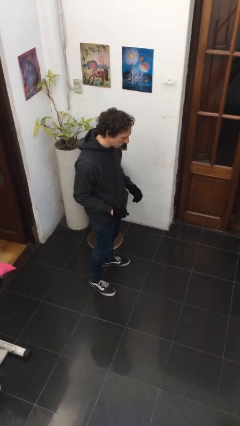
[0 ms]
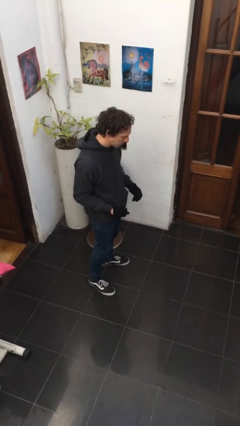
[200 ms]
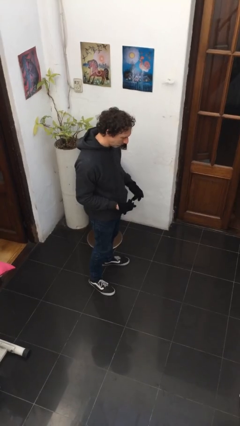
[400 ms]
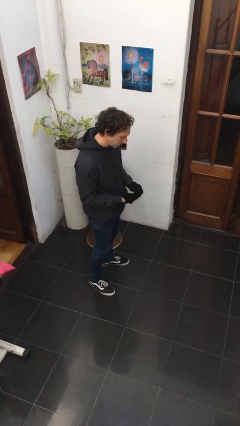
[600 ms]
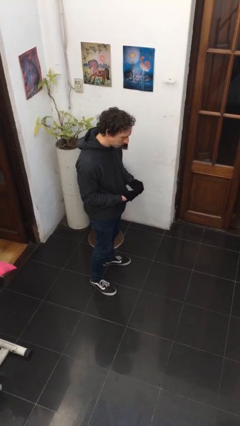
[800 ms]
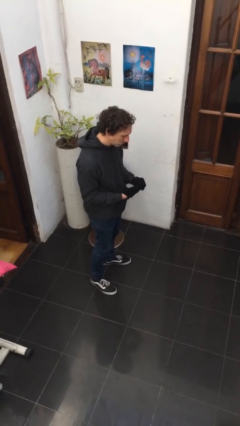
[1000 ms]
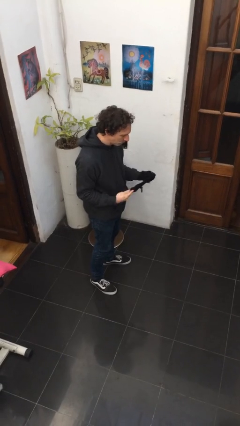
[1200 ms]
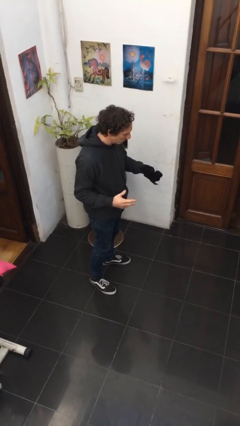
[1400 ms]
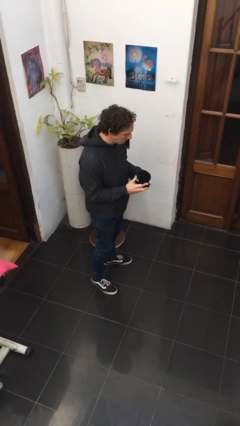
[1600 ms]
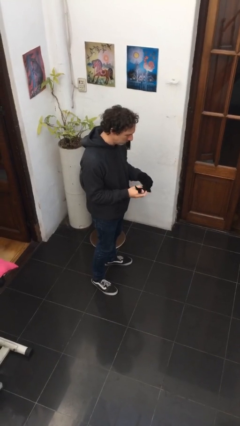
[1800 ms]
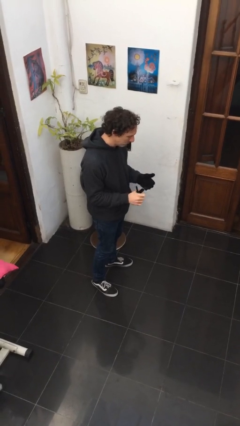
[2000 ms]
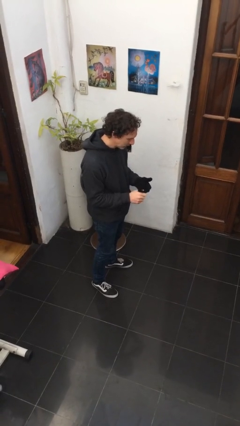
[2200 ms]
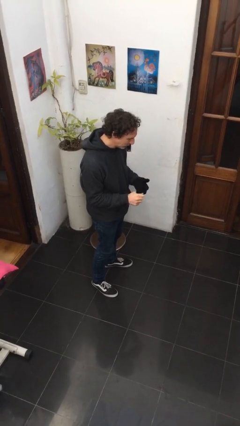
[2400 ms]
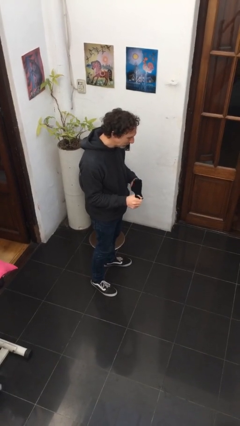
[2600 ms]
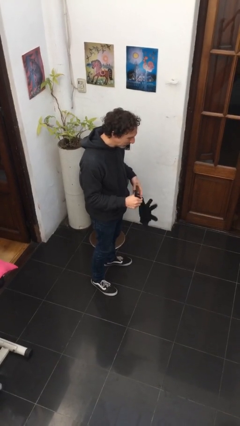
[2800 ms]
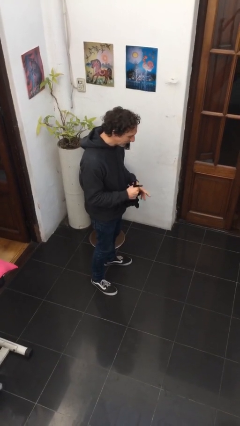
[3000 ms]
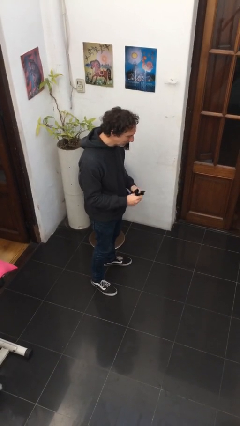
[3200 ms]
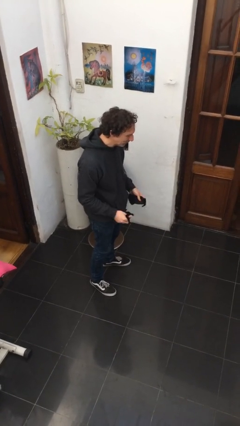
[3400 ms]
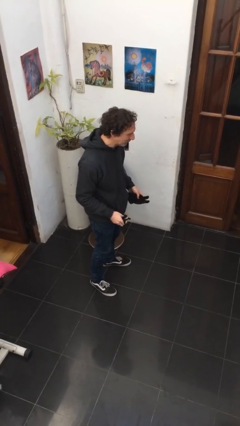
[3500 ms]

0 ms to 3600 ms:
person takes off gloves

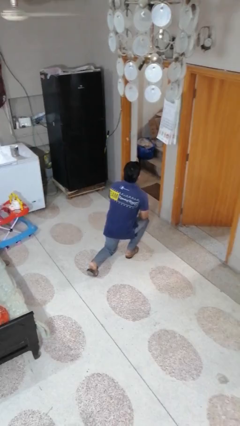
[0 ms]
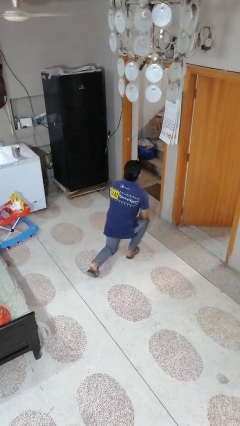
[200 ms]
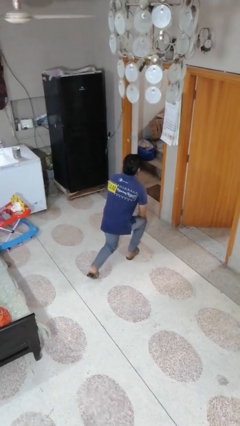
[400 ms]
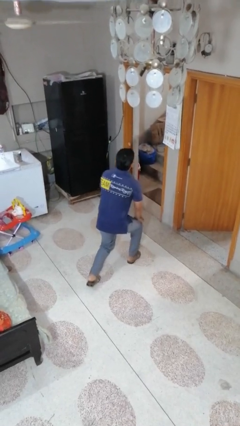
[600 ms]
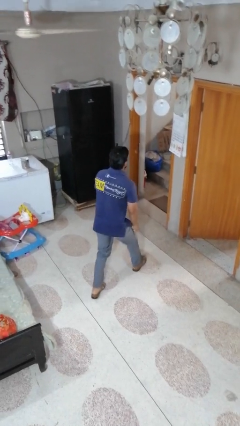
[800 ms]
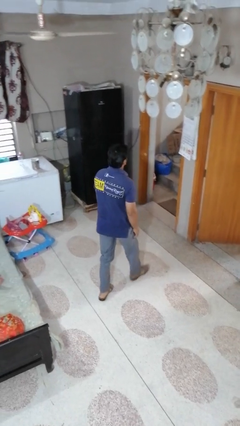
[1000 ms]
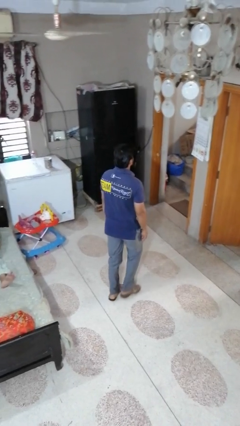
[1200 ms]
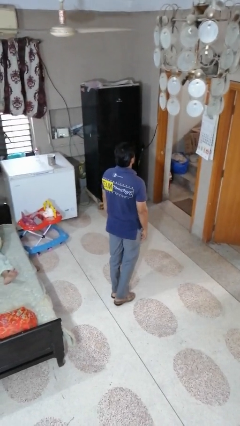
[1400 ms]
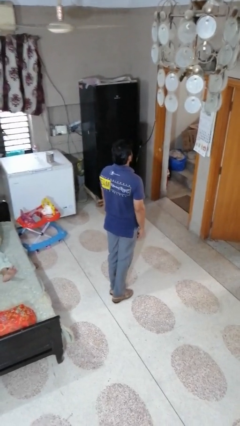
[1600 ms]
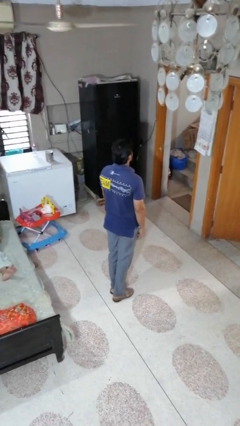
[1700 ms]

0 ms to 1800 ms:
person stands up from floor

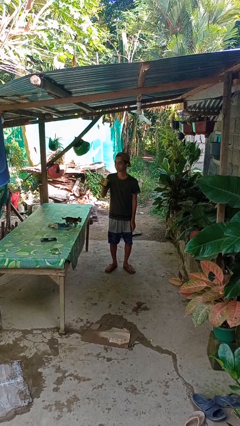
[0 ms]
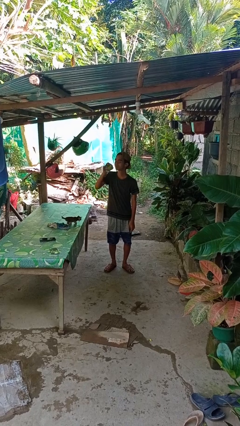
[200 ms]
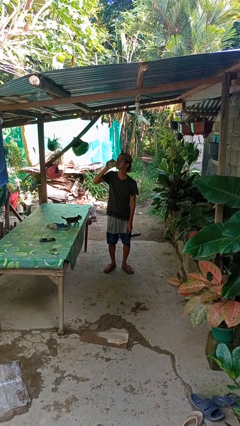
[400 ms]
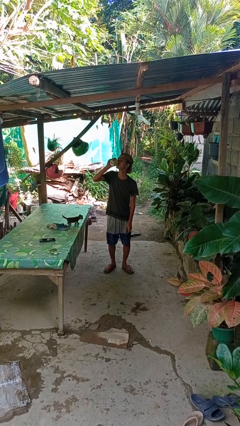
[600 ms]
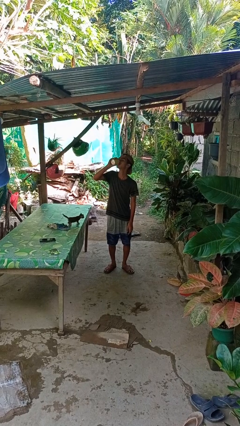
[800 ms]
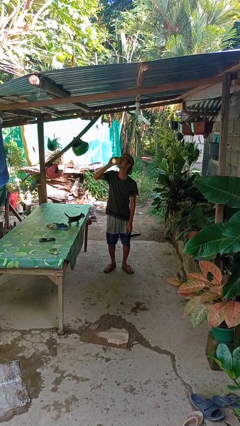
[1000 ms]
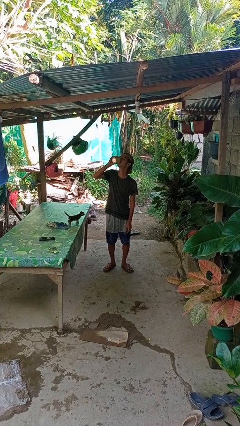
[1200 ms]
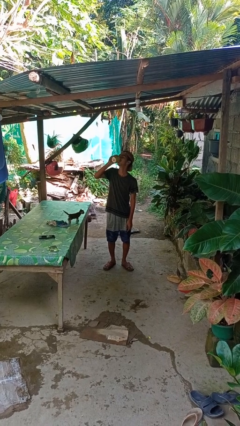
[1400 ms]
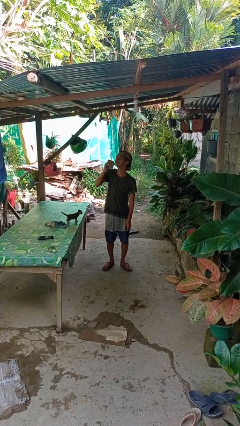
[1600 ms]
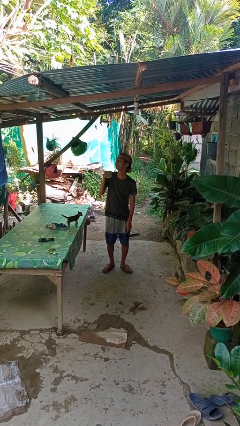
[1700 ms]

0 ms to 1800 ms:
person drinks from beverage can

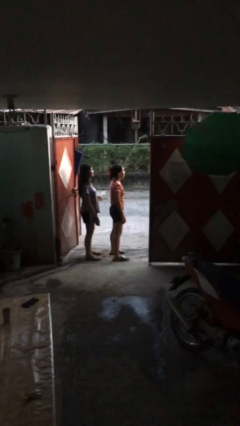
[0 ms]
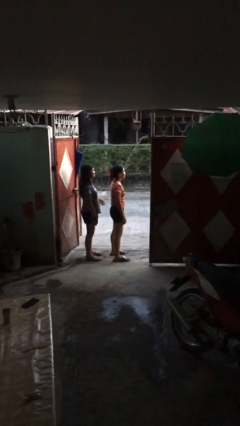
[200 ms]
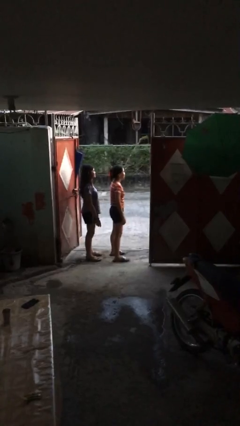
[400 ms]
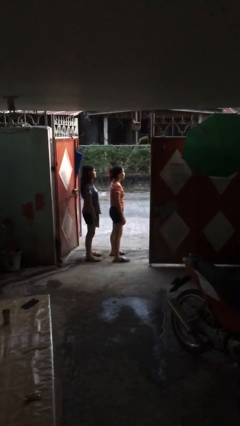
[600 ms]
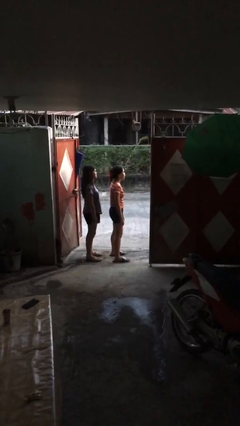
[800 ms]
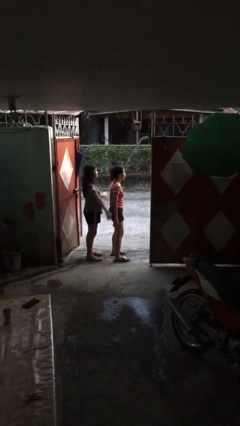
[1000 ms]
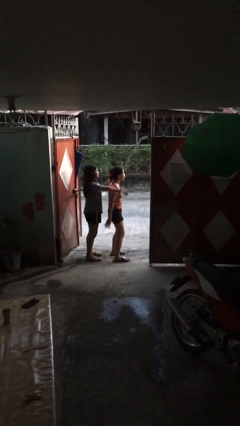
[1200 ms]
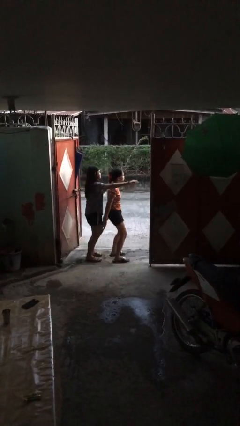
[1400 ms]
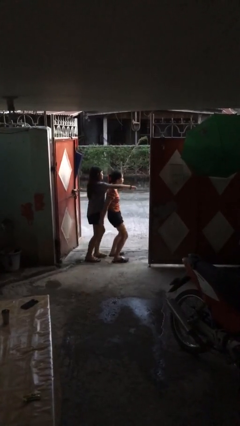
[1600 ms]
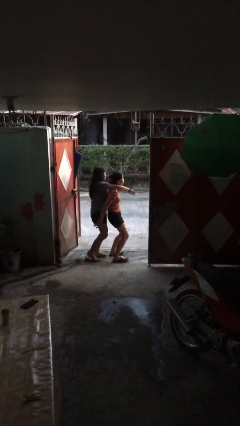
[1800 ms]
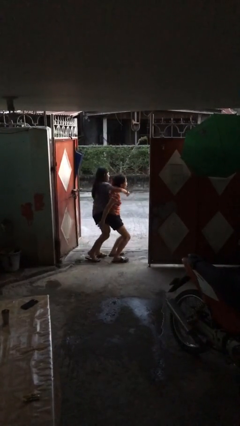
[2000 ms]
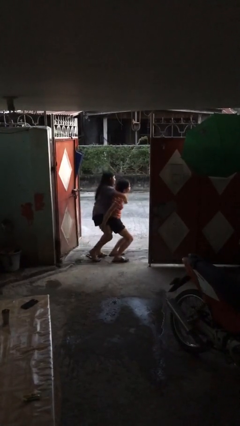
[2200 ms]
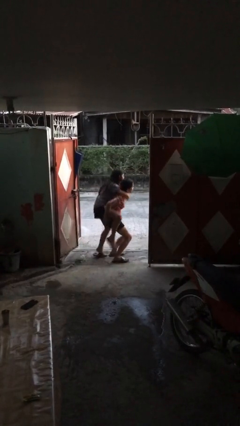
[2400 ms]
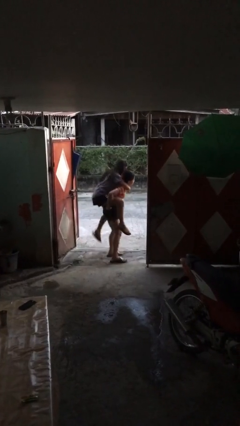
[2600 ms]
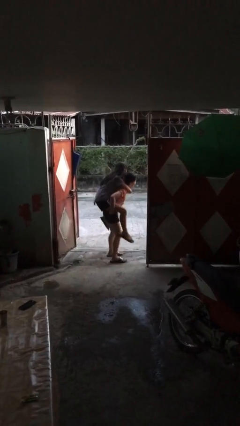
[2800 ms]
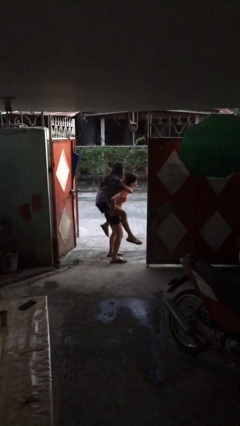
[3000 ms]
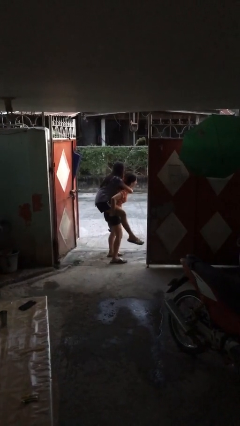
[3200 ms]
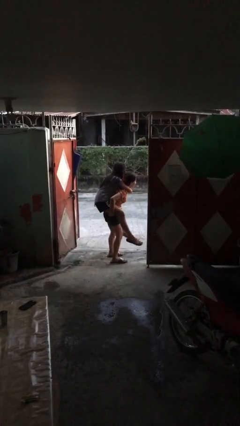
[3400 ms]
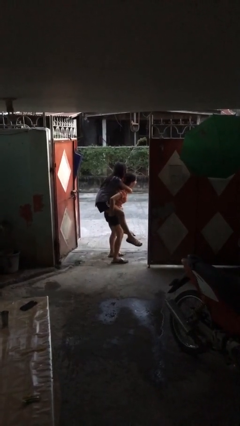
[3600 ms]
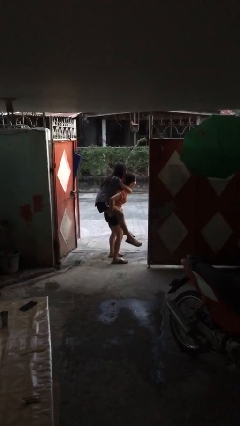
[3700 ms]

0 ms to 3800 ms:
person carries person over shoulder

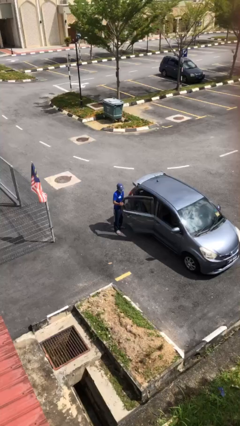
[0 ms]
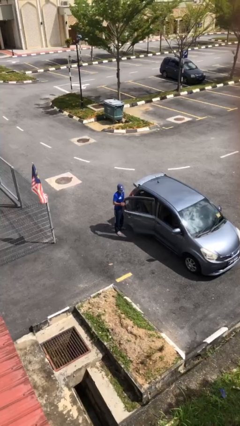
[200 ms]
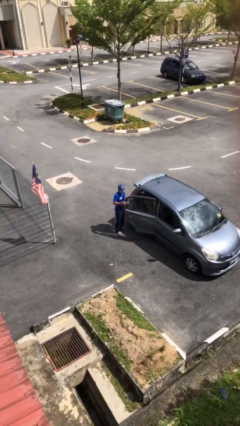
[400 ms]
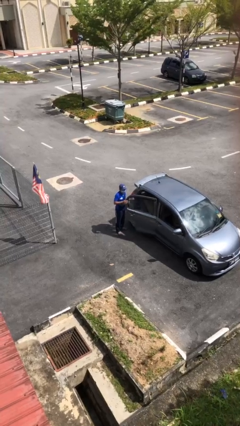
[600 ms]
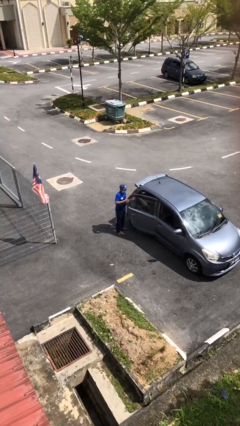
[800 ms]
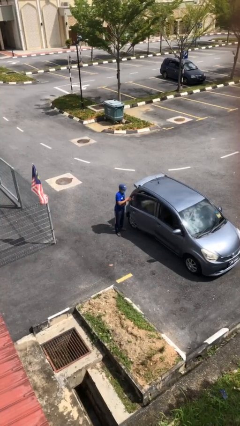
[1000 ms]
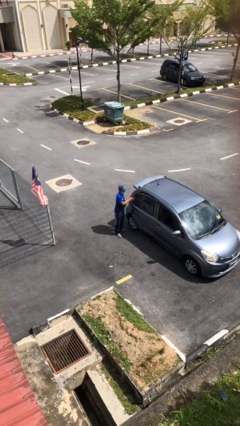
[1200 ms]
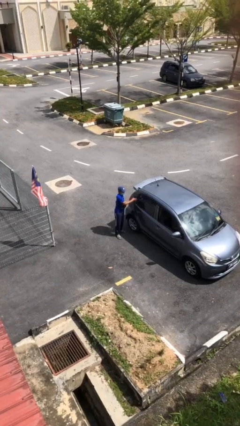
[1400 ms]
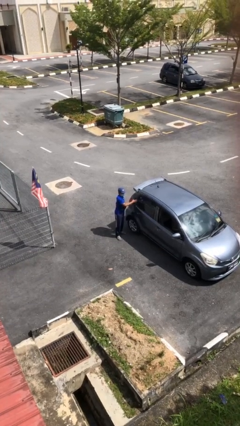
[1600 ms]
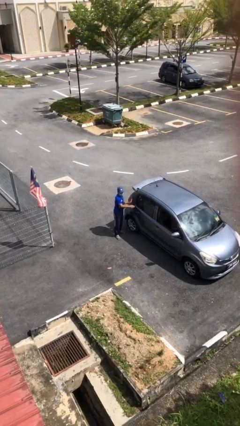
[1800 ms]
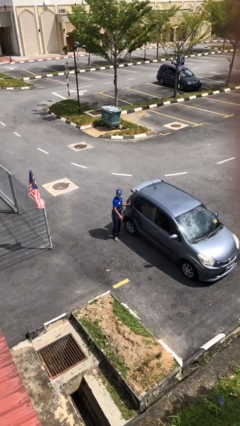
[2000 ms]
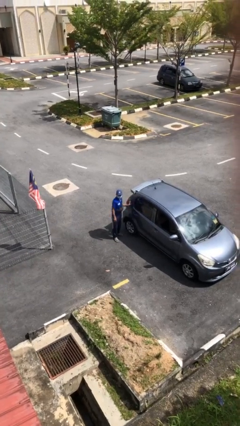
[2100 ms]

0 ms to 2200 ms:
person closes car door

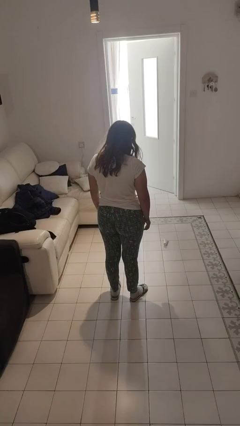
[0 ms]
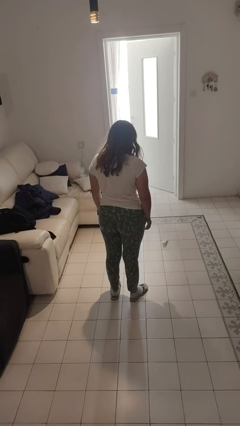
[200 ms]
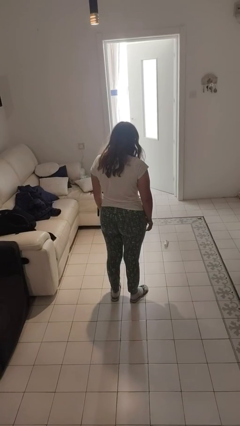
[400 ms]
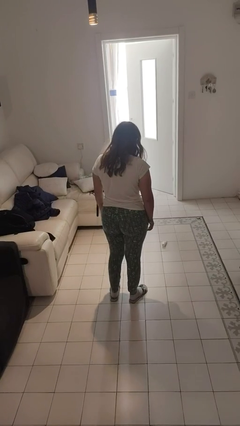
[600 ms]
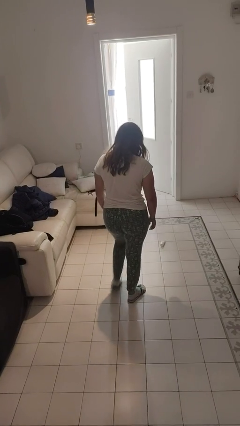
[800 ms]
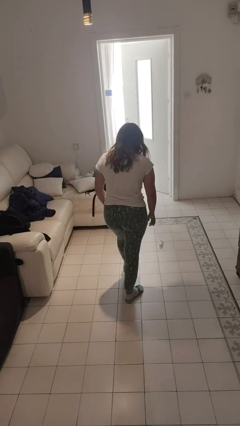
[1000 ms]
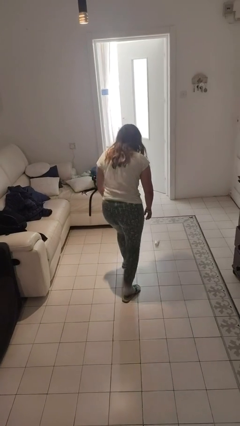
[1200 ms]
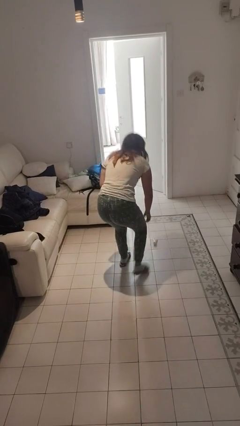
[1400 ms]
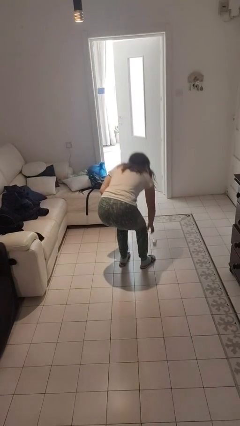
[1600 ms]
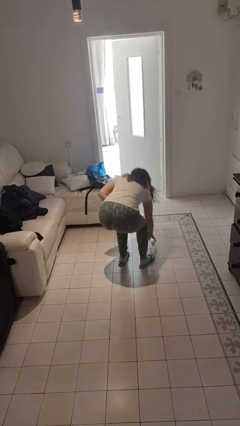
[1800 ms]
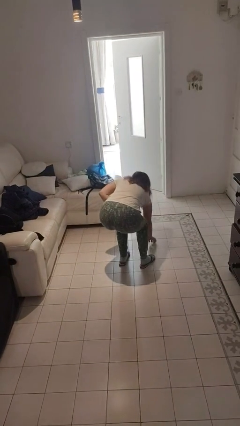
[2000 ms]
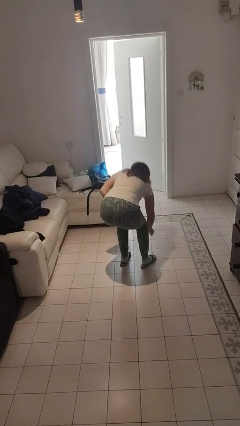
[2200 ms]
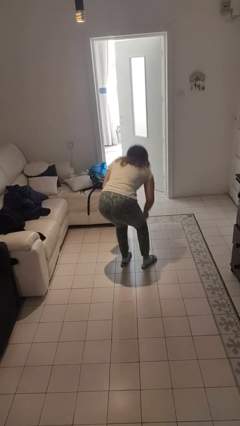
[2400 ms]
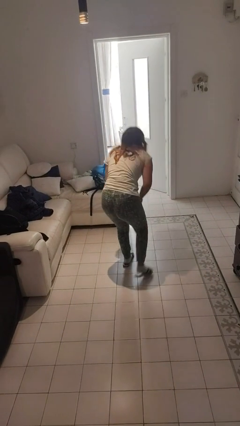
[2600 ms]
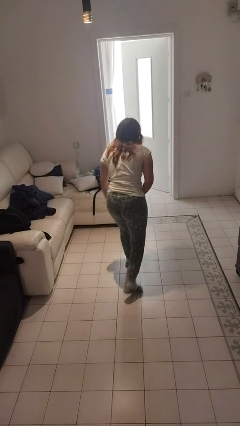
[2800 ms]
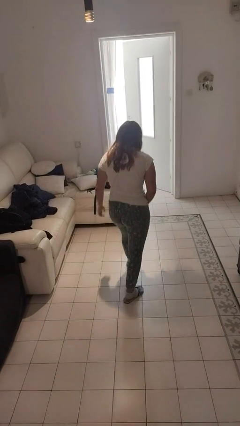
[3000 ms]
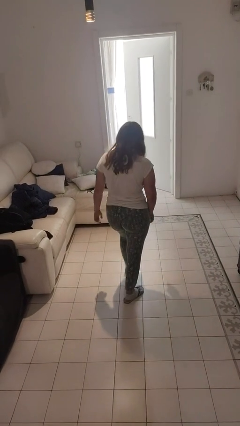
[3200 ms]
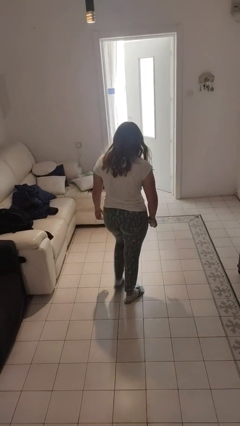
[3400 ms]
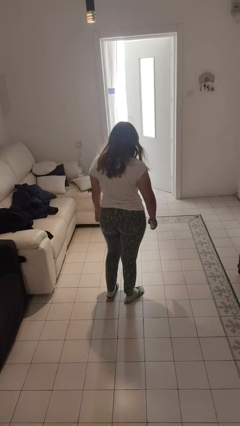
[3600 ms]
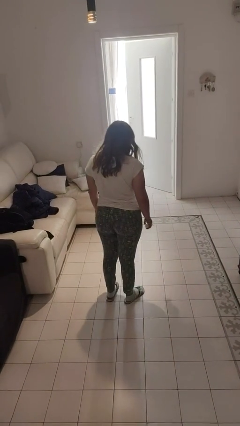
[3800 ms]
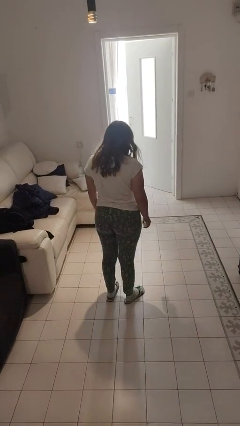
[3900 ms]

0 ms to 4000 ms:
person picks up object from floor

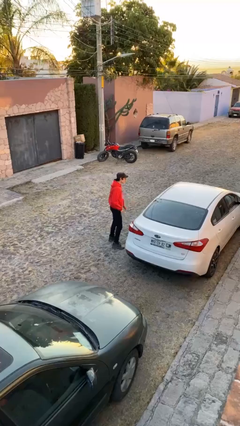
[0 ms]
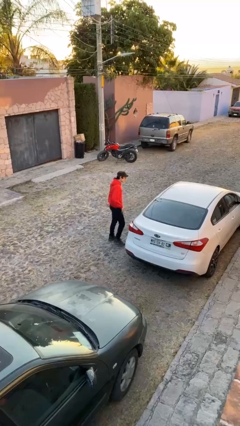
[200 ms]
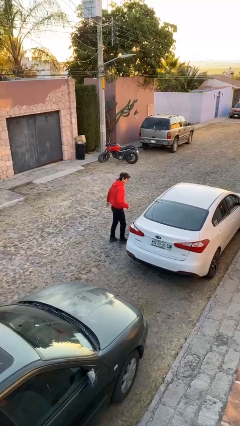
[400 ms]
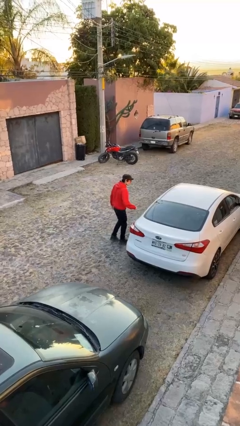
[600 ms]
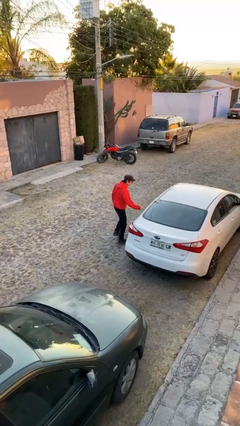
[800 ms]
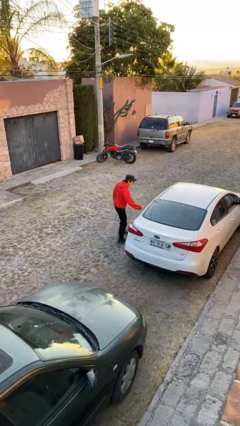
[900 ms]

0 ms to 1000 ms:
person closes facility door
